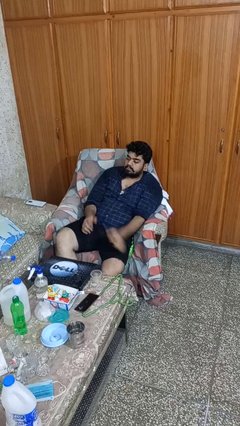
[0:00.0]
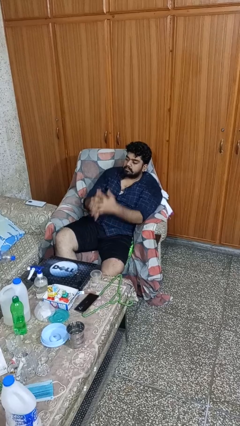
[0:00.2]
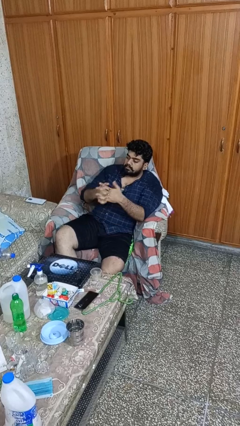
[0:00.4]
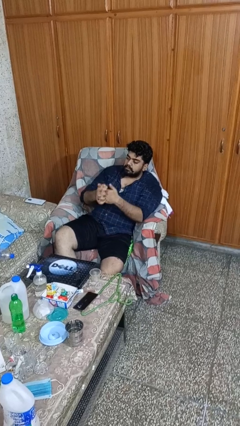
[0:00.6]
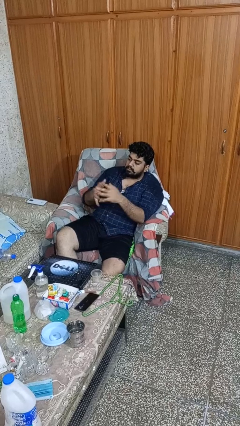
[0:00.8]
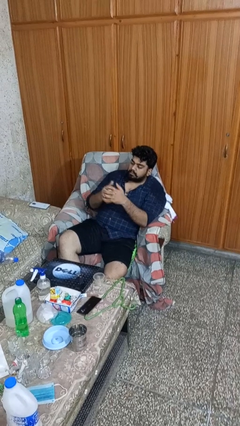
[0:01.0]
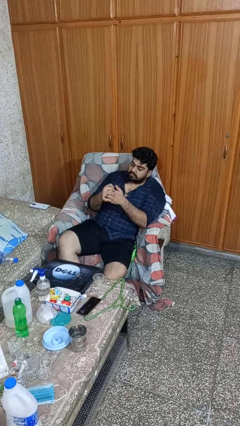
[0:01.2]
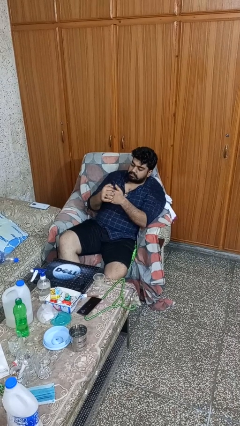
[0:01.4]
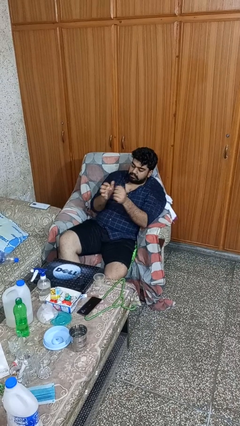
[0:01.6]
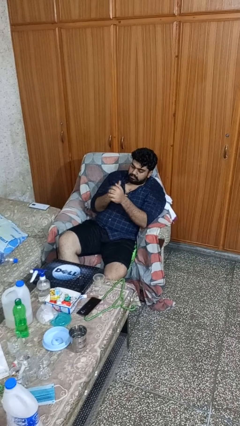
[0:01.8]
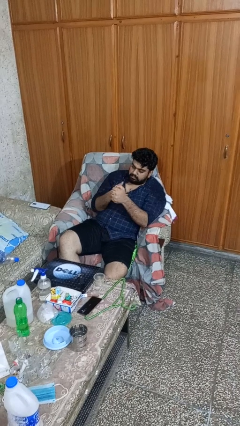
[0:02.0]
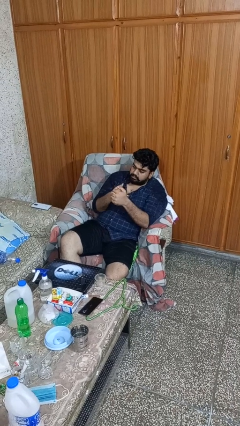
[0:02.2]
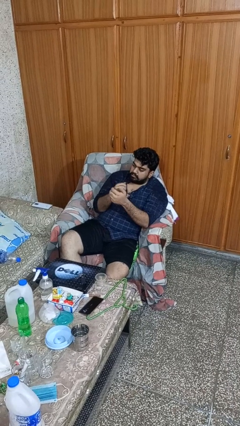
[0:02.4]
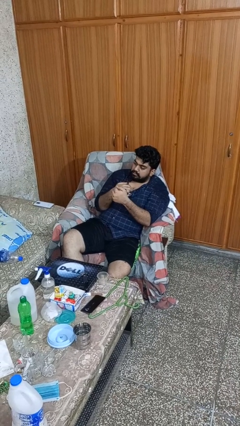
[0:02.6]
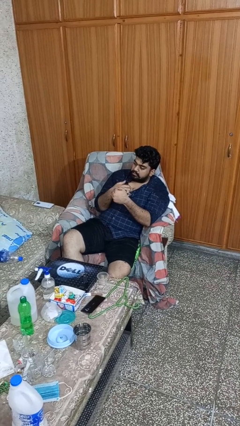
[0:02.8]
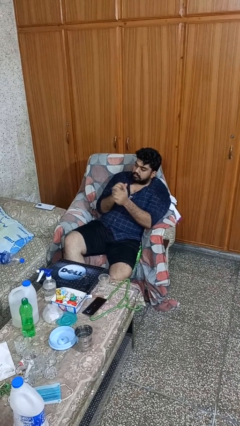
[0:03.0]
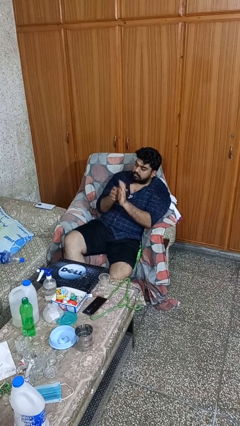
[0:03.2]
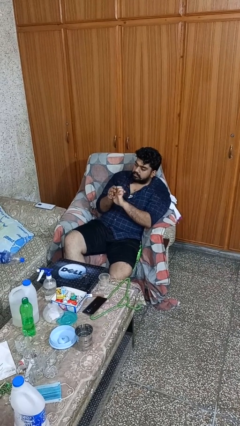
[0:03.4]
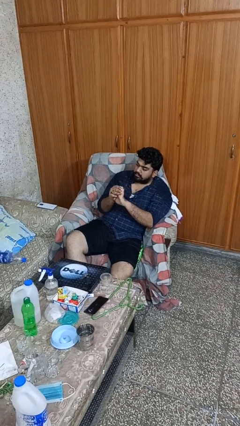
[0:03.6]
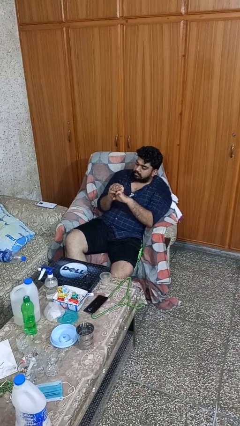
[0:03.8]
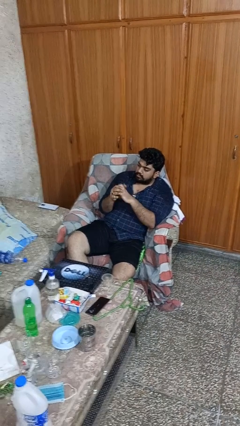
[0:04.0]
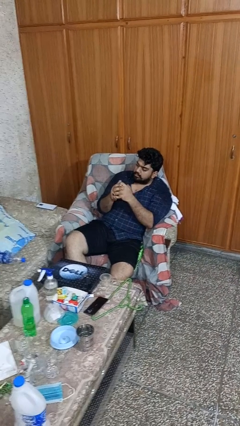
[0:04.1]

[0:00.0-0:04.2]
person cracks knuckles

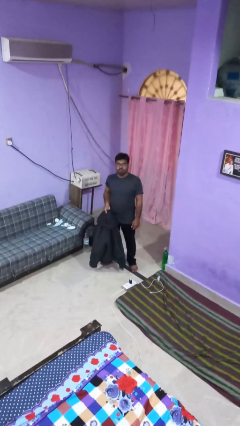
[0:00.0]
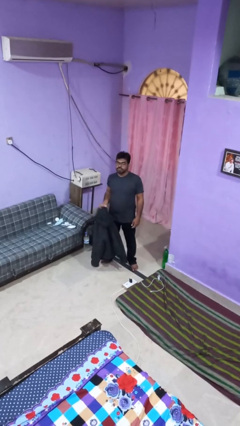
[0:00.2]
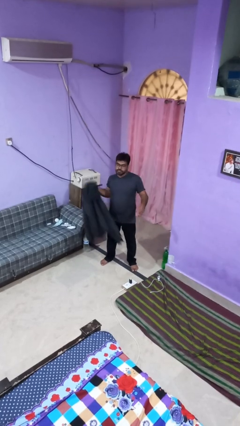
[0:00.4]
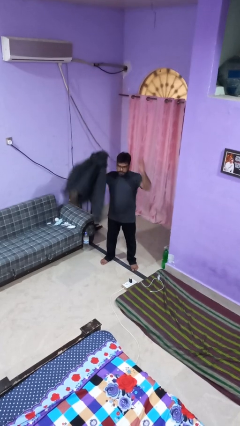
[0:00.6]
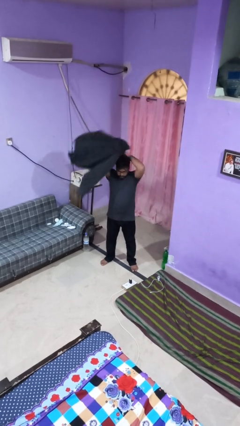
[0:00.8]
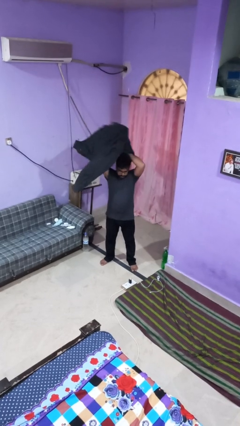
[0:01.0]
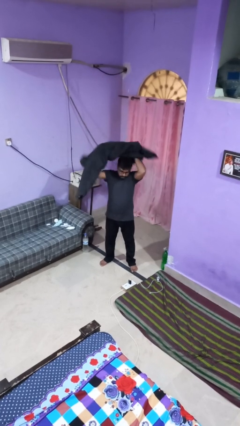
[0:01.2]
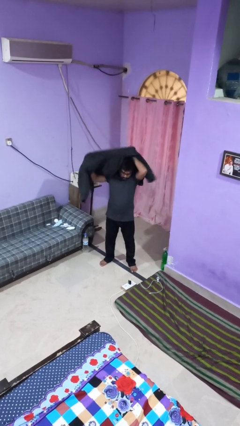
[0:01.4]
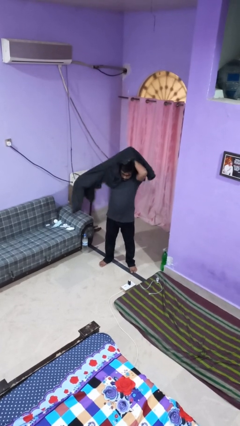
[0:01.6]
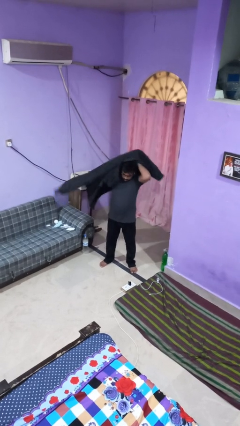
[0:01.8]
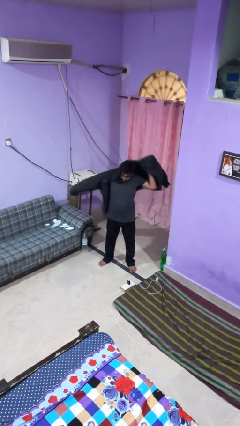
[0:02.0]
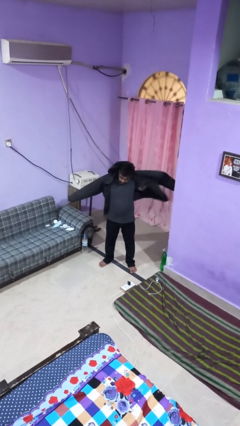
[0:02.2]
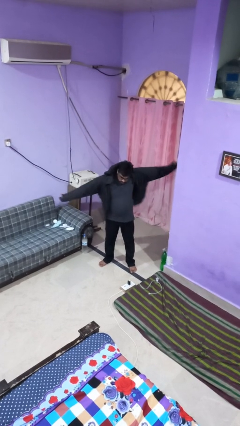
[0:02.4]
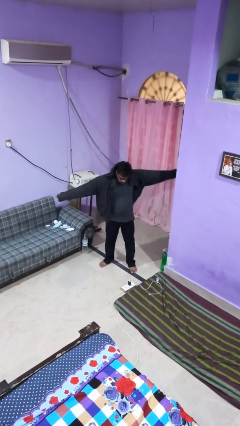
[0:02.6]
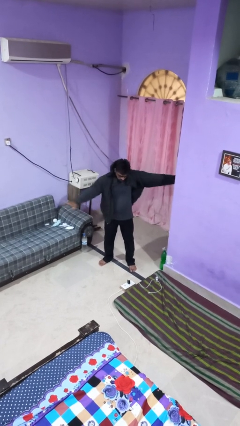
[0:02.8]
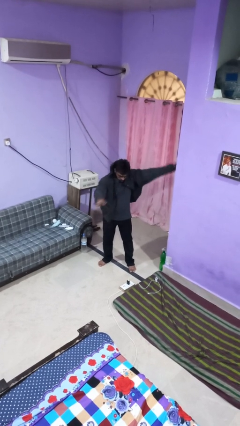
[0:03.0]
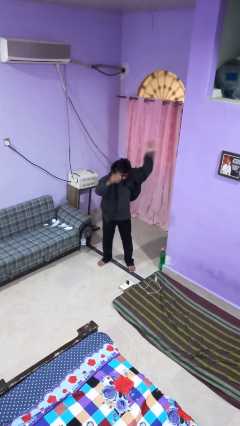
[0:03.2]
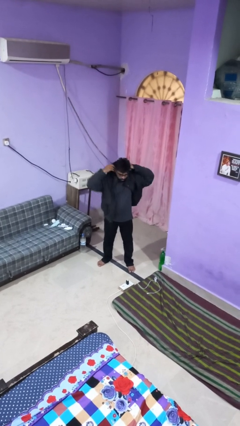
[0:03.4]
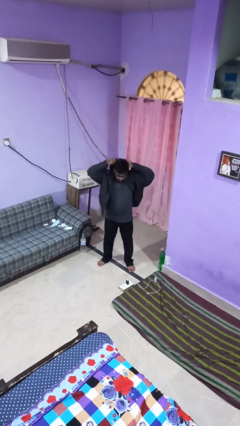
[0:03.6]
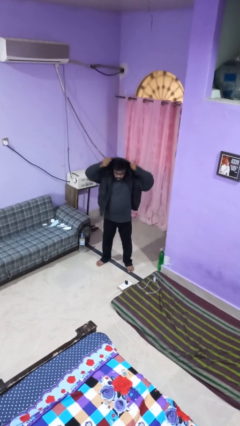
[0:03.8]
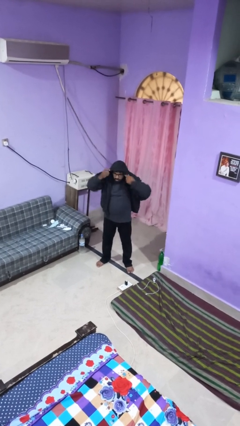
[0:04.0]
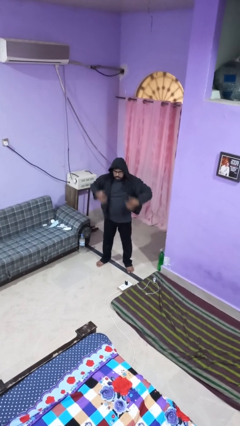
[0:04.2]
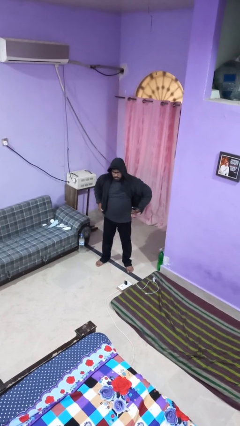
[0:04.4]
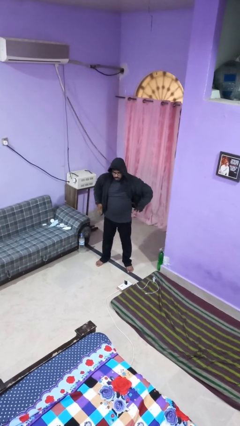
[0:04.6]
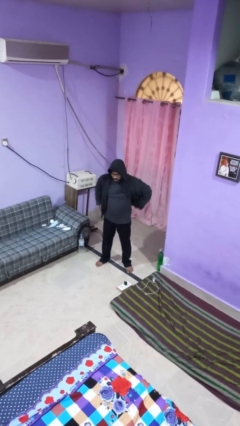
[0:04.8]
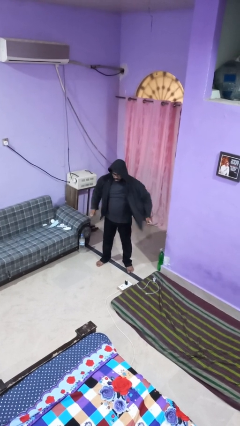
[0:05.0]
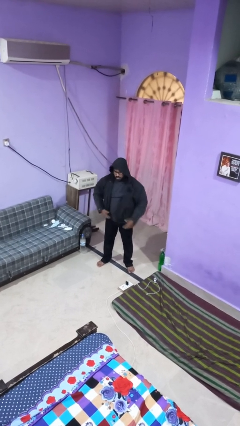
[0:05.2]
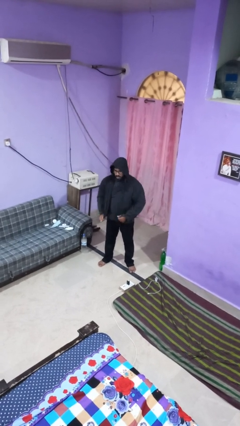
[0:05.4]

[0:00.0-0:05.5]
person puts on hoodie

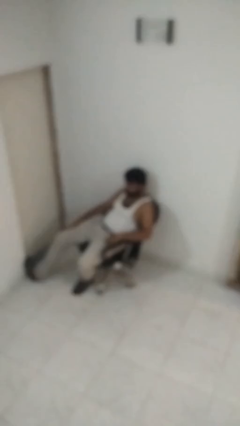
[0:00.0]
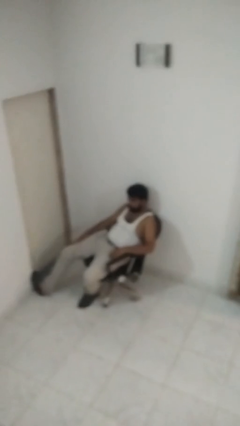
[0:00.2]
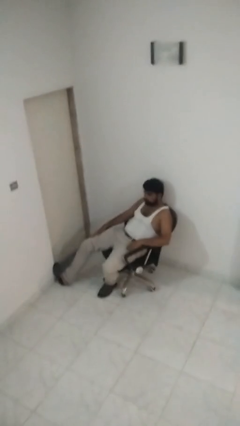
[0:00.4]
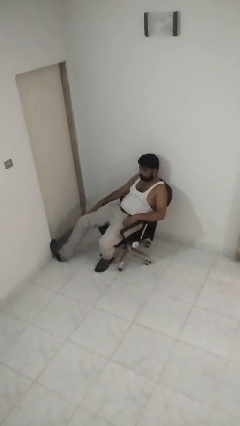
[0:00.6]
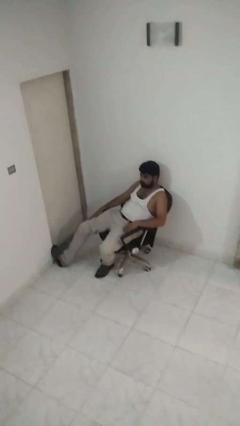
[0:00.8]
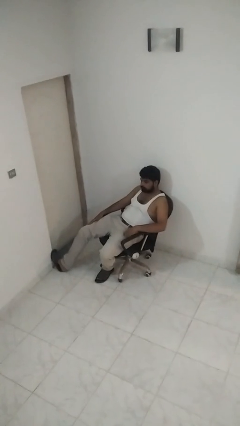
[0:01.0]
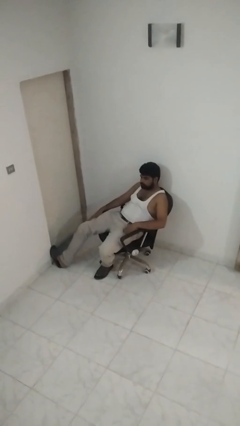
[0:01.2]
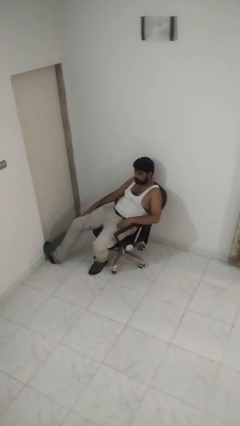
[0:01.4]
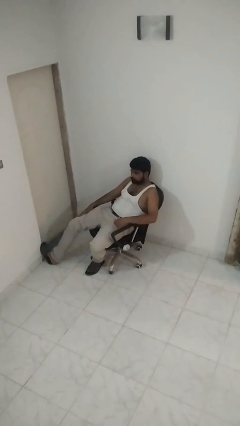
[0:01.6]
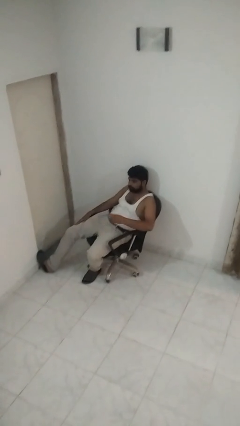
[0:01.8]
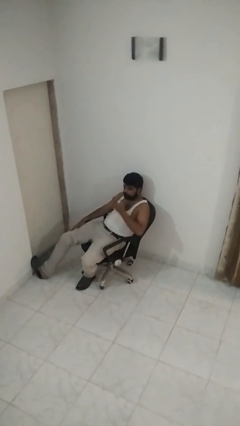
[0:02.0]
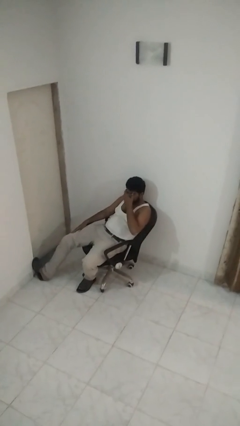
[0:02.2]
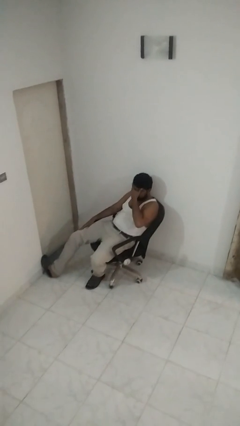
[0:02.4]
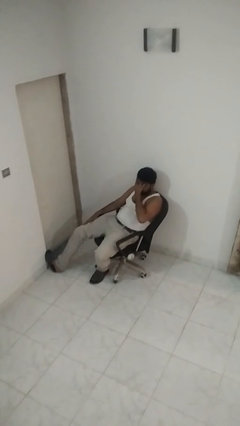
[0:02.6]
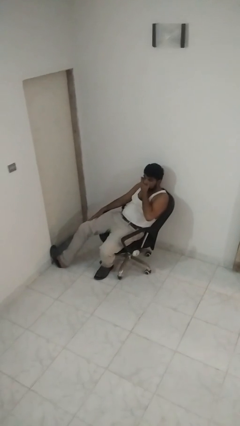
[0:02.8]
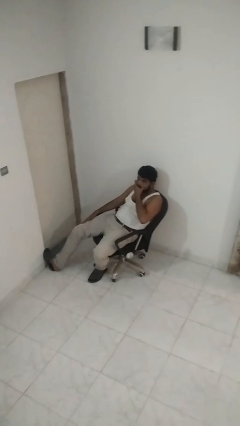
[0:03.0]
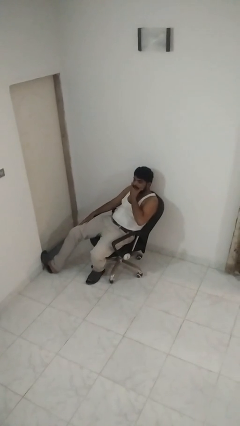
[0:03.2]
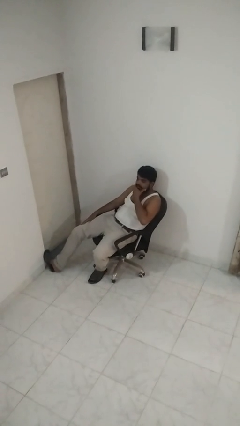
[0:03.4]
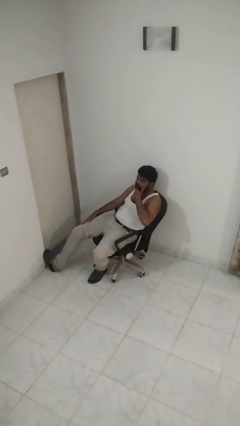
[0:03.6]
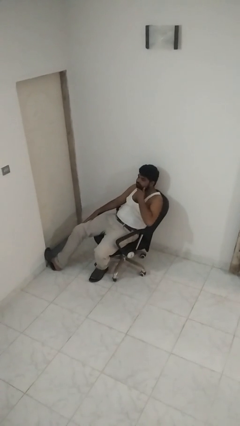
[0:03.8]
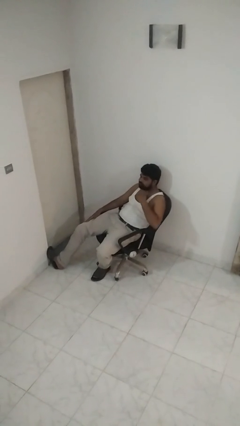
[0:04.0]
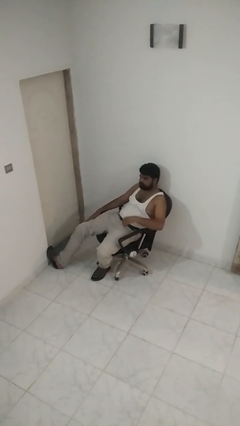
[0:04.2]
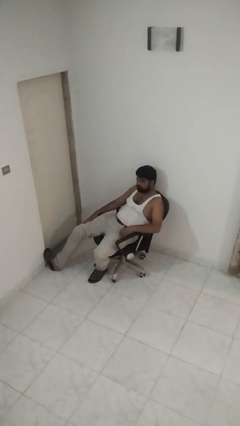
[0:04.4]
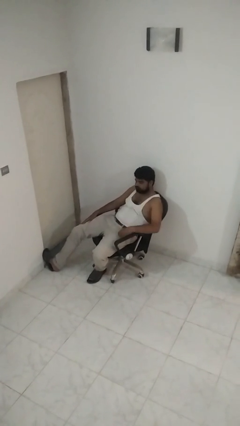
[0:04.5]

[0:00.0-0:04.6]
person scratches face

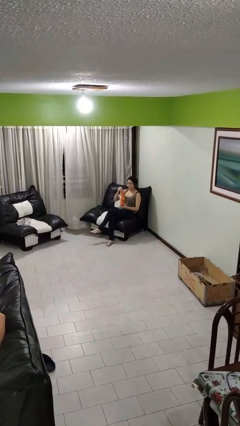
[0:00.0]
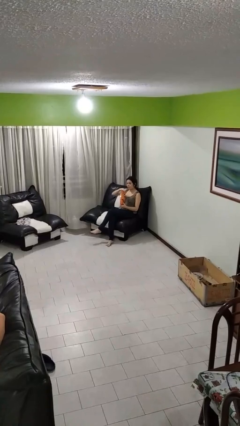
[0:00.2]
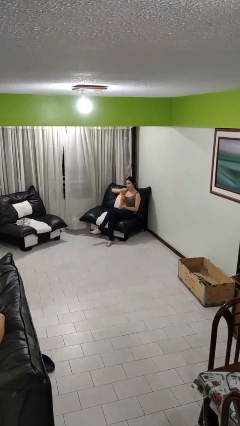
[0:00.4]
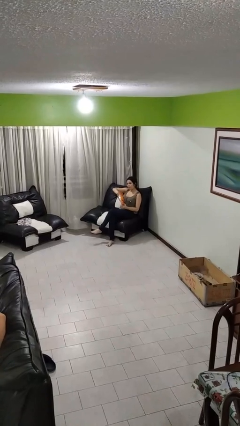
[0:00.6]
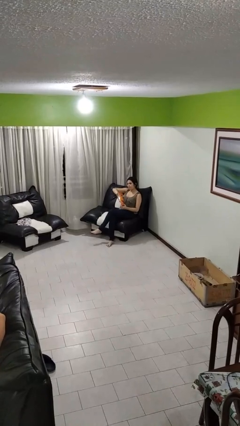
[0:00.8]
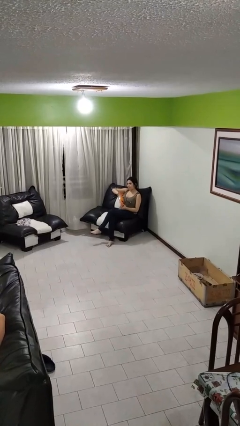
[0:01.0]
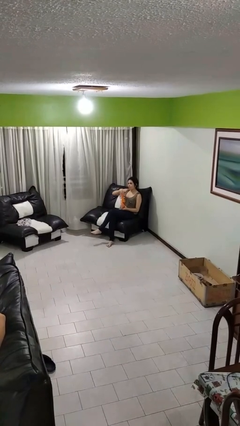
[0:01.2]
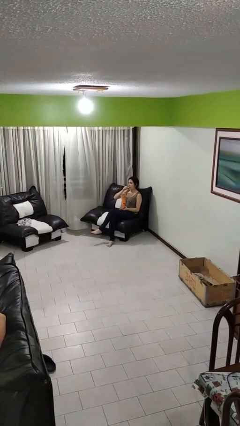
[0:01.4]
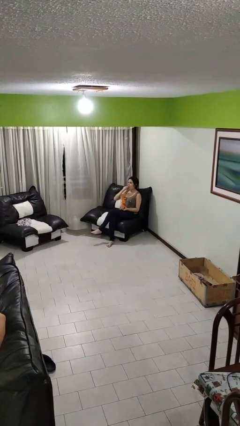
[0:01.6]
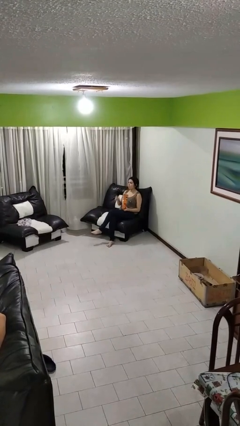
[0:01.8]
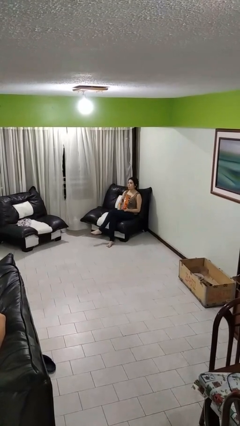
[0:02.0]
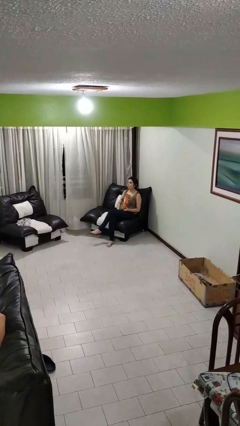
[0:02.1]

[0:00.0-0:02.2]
person eats snack from bag

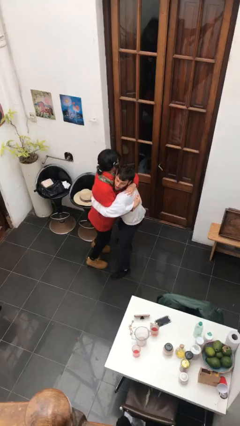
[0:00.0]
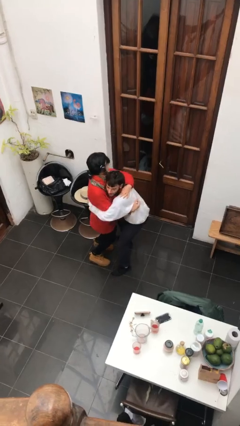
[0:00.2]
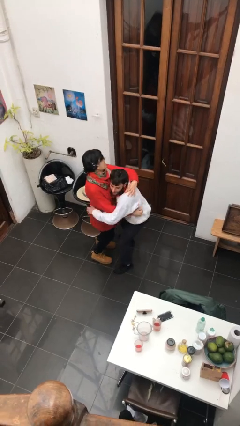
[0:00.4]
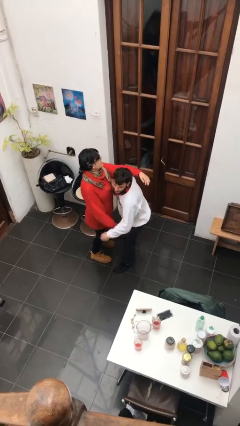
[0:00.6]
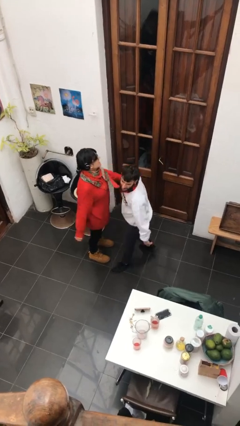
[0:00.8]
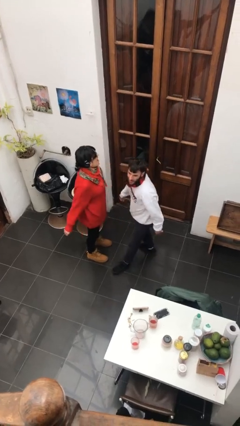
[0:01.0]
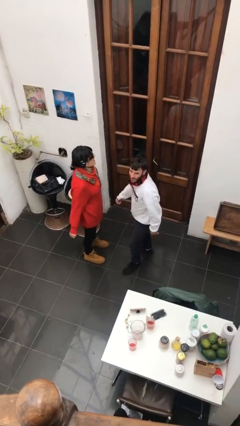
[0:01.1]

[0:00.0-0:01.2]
person puts down person

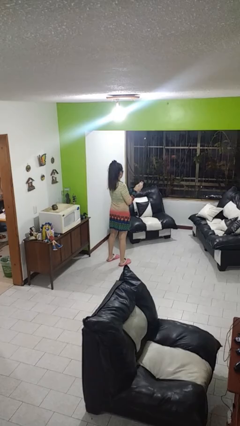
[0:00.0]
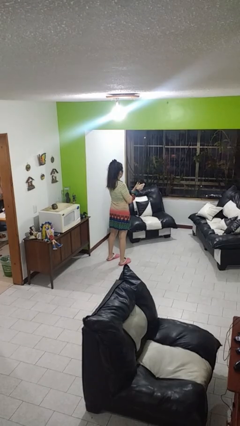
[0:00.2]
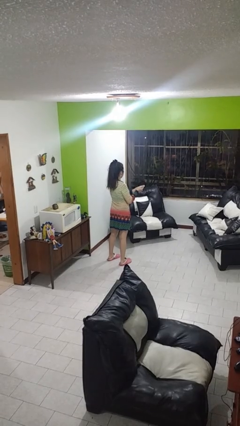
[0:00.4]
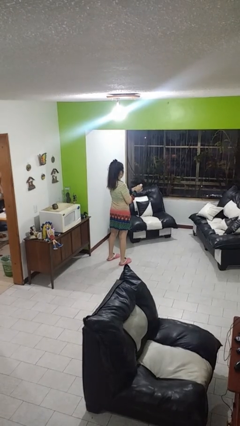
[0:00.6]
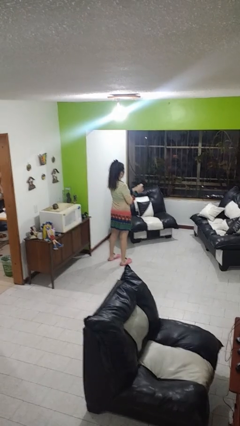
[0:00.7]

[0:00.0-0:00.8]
person crumples paper
